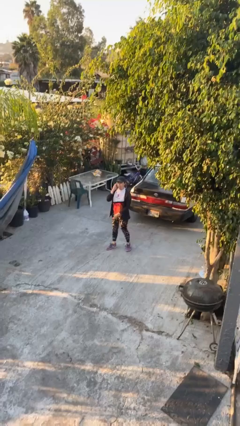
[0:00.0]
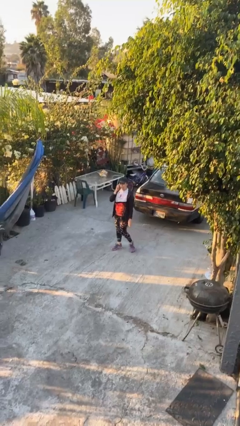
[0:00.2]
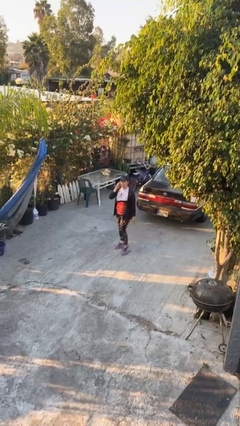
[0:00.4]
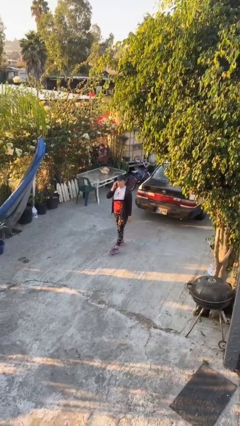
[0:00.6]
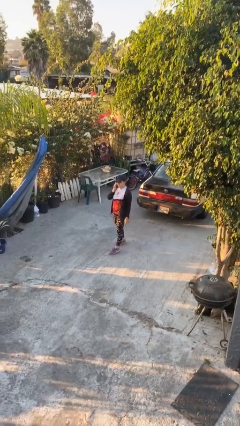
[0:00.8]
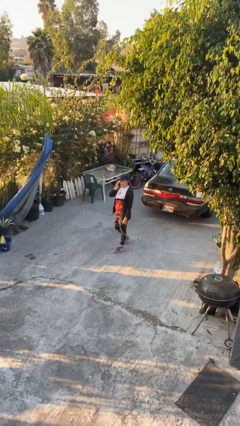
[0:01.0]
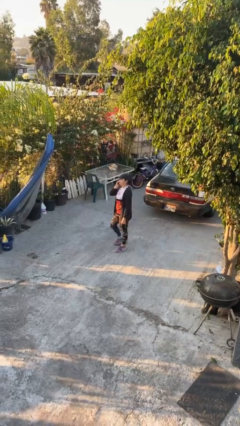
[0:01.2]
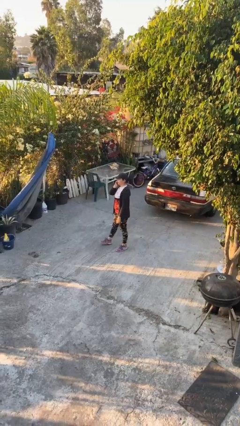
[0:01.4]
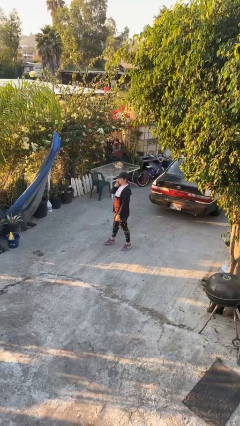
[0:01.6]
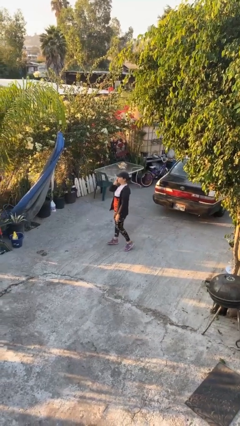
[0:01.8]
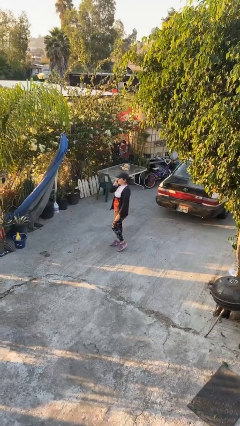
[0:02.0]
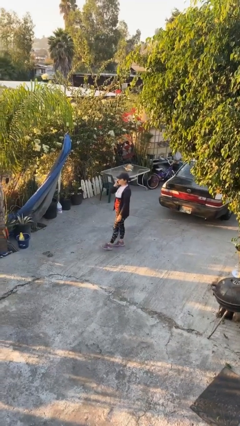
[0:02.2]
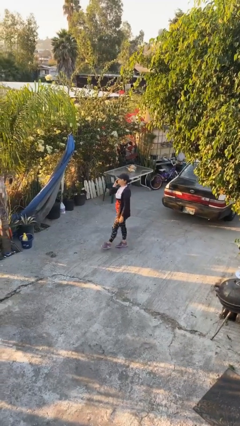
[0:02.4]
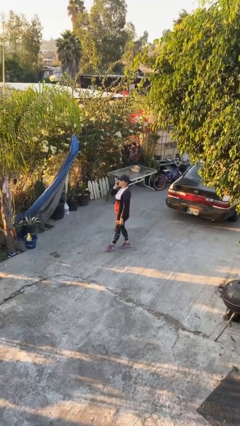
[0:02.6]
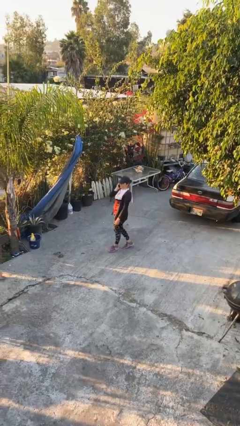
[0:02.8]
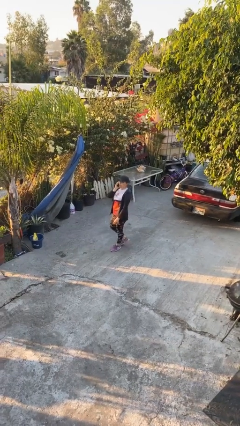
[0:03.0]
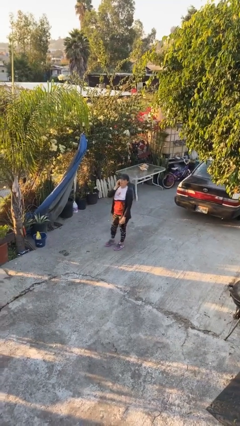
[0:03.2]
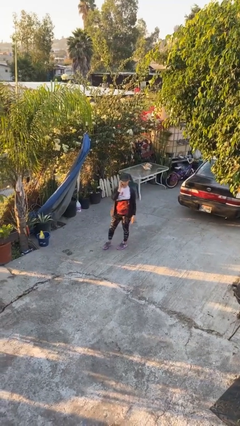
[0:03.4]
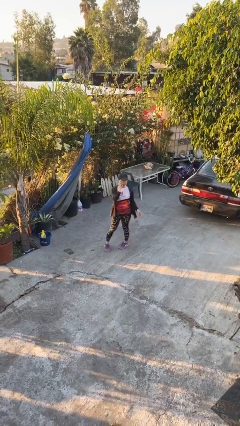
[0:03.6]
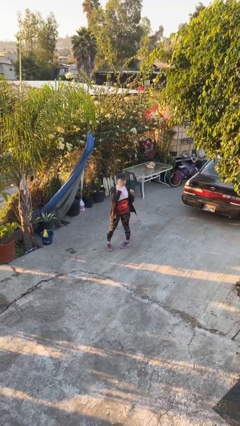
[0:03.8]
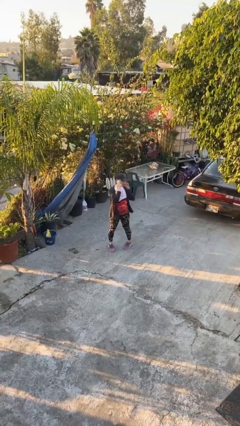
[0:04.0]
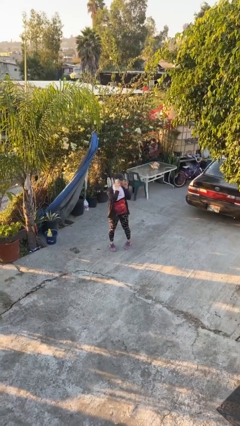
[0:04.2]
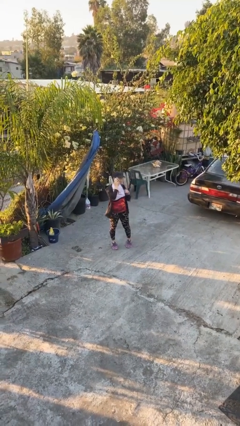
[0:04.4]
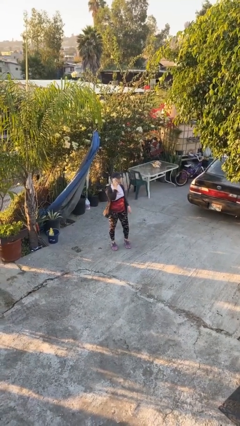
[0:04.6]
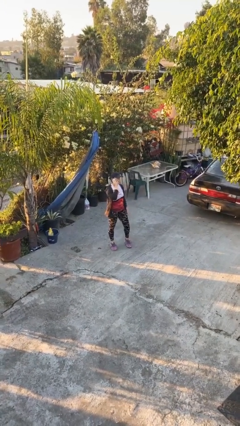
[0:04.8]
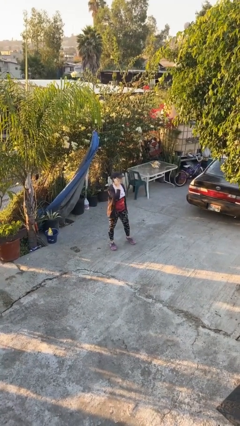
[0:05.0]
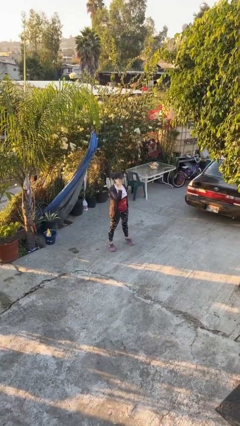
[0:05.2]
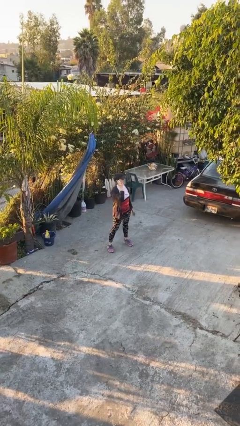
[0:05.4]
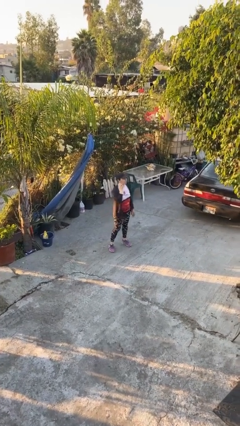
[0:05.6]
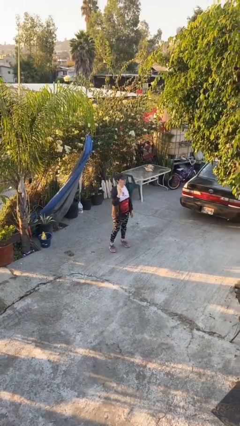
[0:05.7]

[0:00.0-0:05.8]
person talks on phone

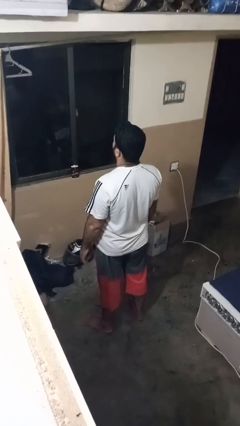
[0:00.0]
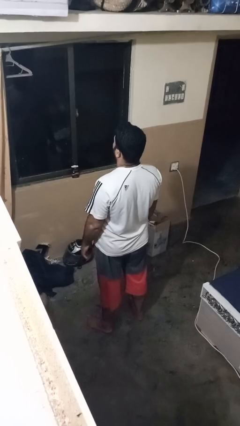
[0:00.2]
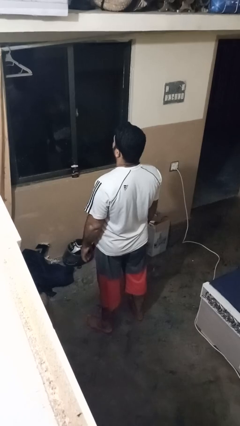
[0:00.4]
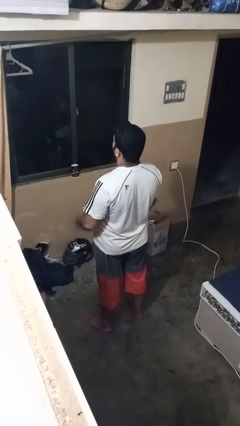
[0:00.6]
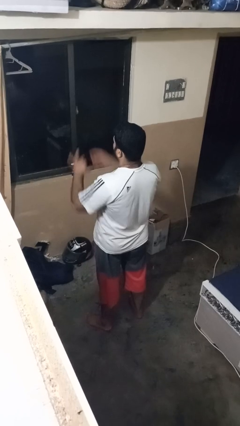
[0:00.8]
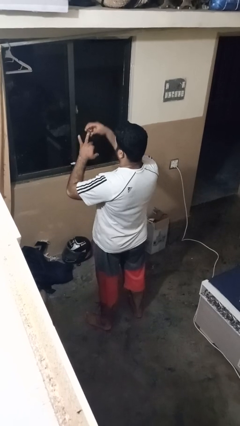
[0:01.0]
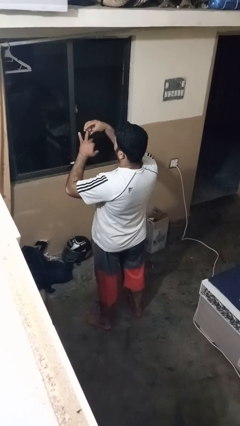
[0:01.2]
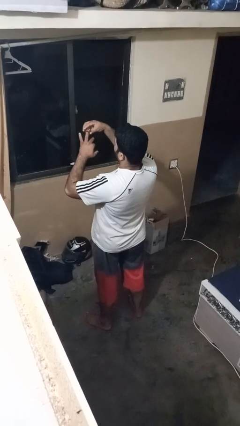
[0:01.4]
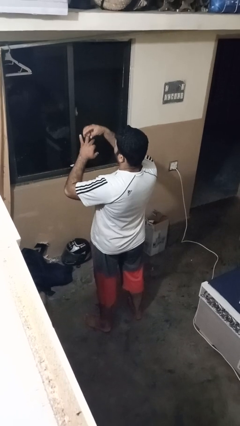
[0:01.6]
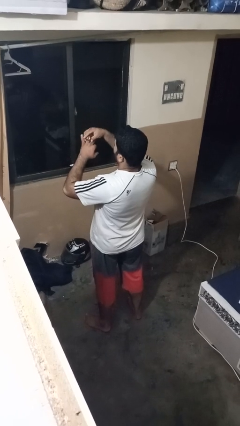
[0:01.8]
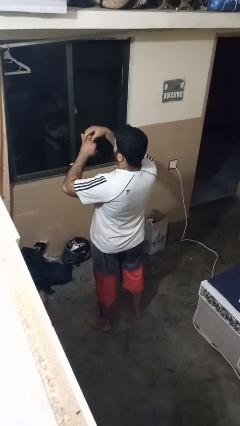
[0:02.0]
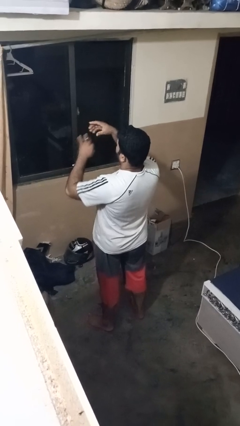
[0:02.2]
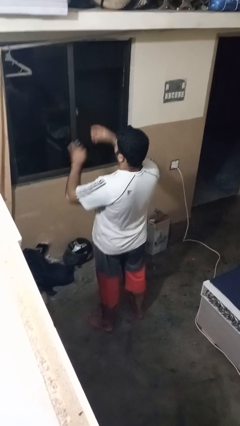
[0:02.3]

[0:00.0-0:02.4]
person puts on ring

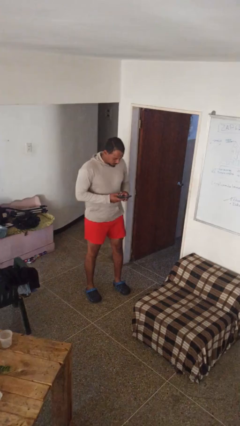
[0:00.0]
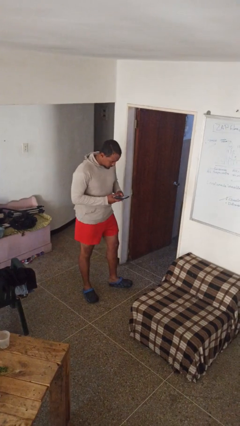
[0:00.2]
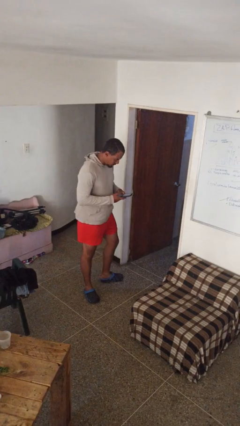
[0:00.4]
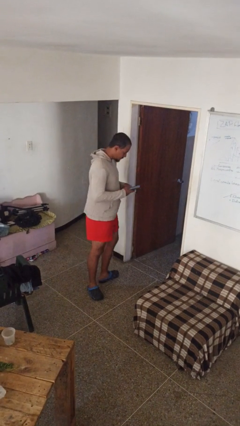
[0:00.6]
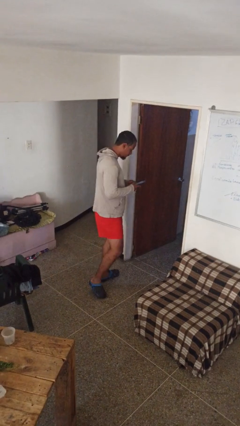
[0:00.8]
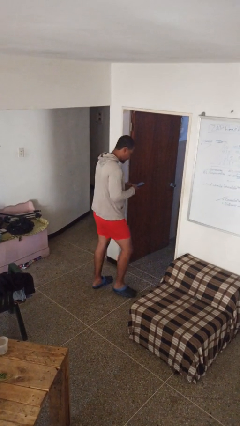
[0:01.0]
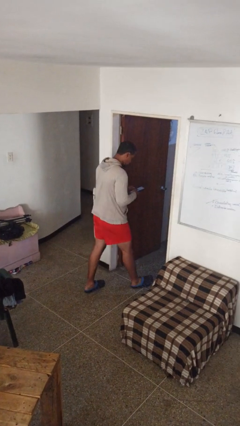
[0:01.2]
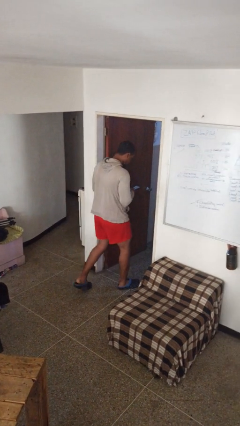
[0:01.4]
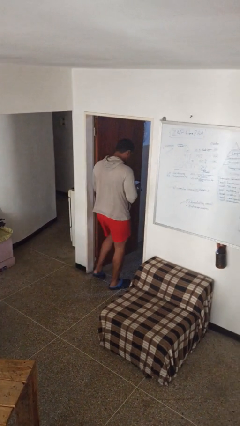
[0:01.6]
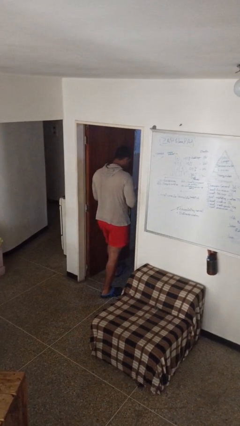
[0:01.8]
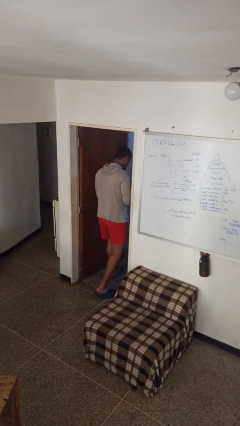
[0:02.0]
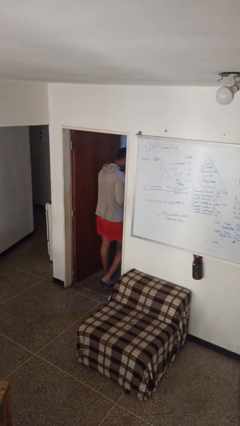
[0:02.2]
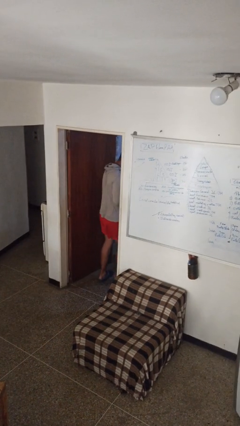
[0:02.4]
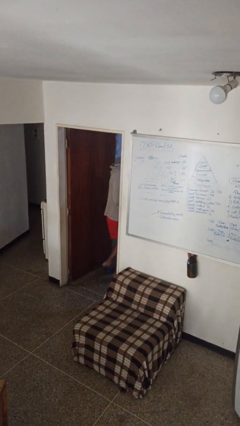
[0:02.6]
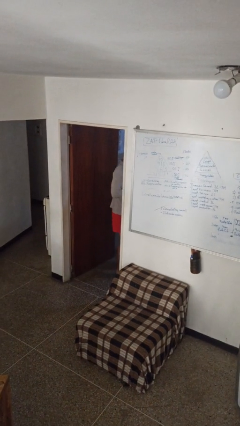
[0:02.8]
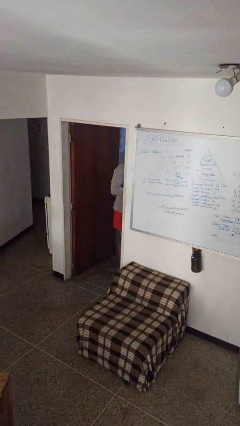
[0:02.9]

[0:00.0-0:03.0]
person exits scene through structure

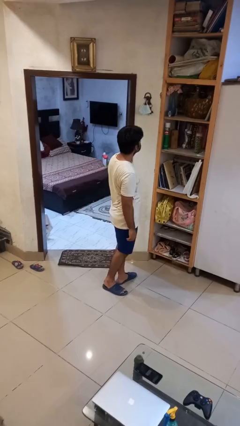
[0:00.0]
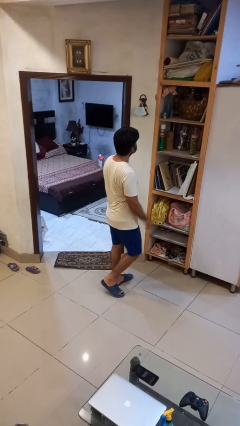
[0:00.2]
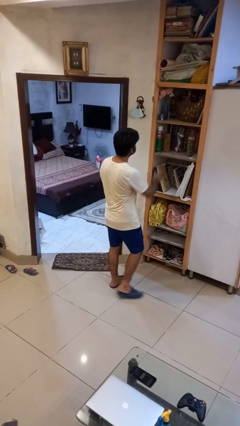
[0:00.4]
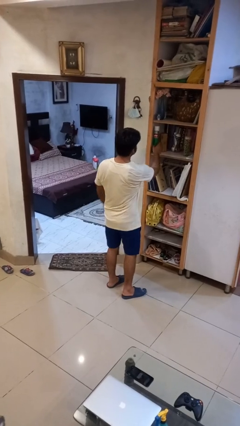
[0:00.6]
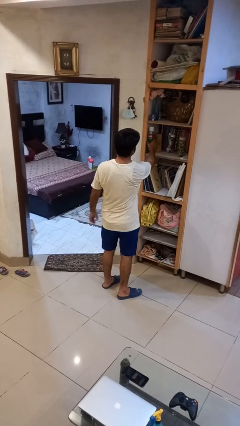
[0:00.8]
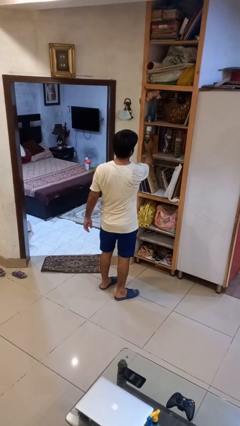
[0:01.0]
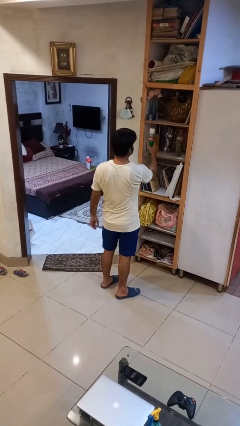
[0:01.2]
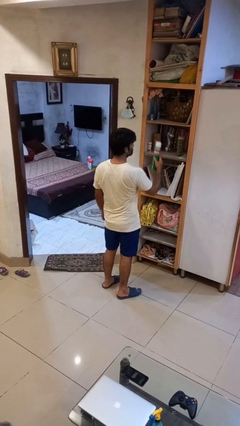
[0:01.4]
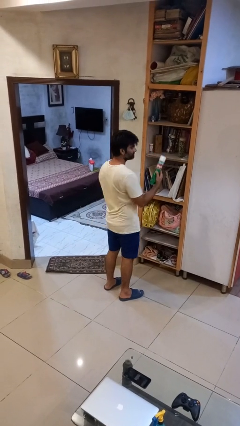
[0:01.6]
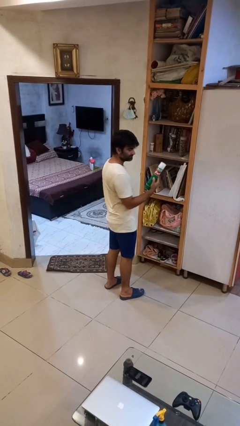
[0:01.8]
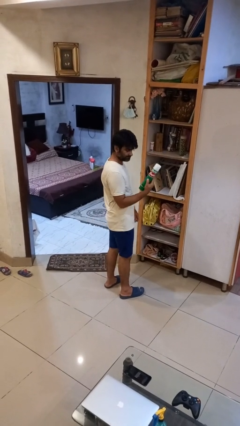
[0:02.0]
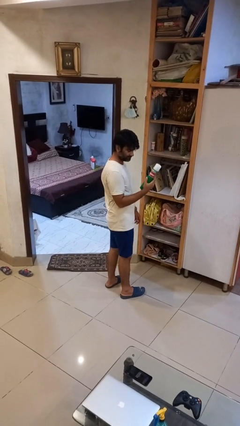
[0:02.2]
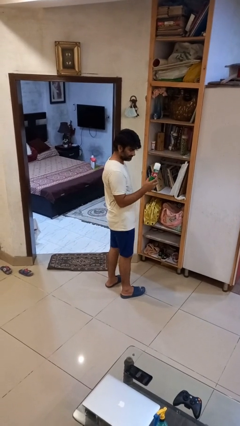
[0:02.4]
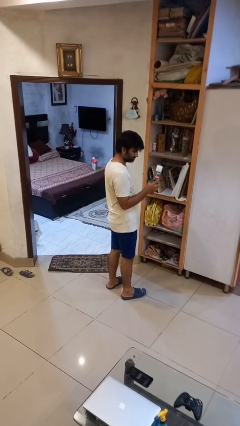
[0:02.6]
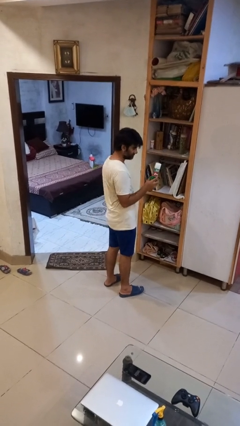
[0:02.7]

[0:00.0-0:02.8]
person picks up object from cabinet

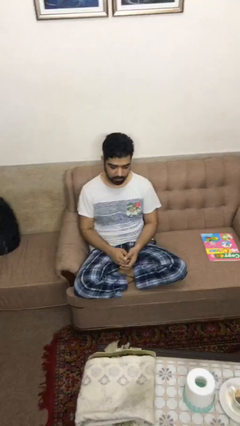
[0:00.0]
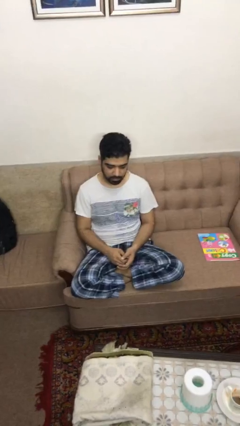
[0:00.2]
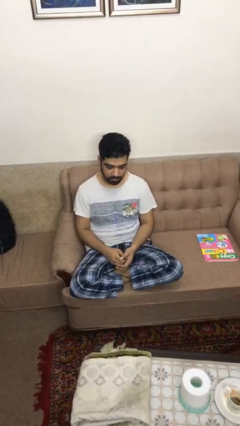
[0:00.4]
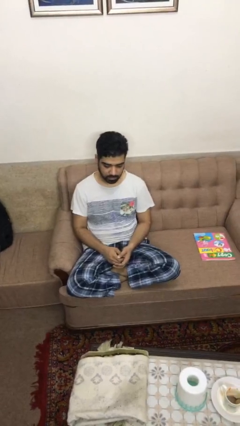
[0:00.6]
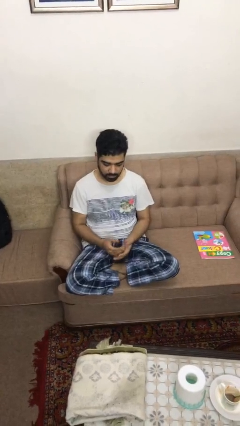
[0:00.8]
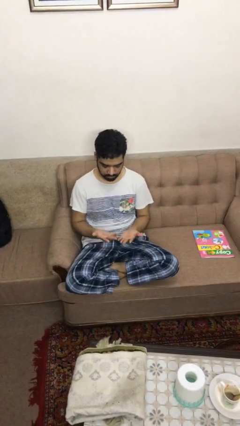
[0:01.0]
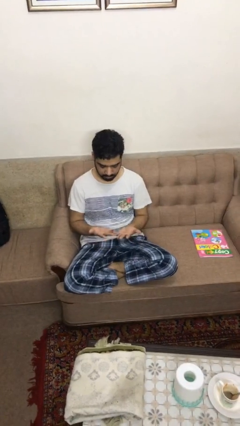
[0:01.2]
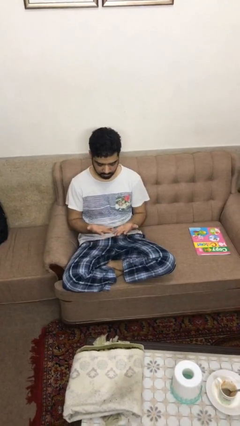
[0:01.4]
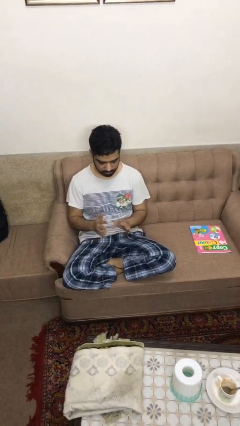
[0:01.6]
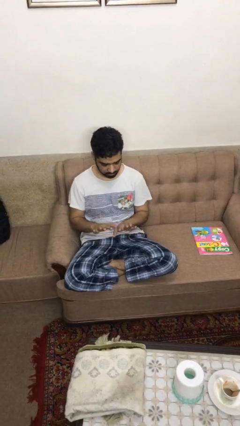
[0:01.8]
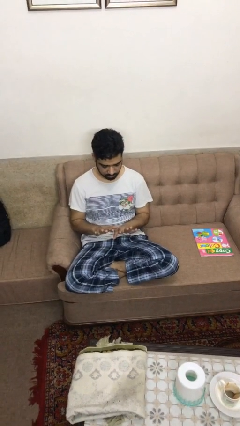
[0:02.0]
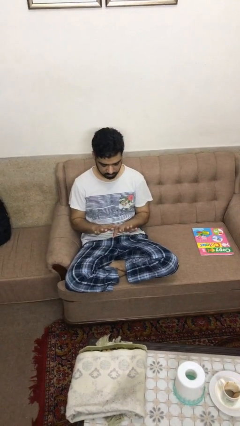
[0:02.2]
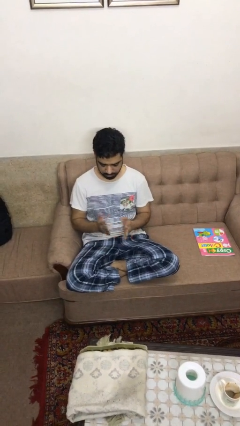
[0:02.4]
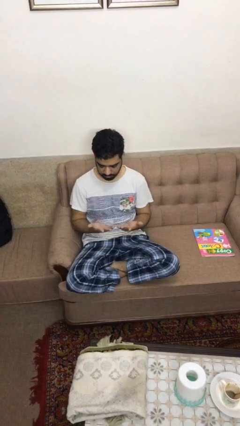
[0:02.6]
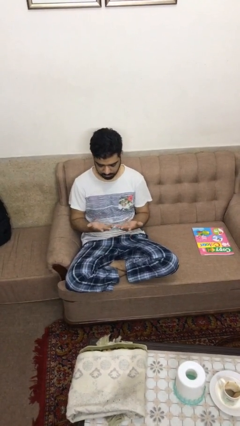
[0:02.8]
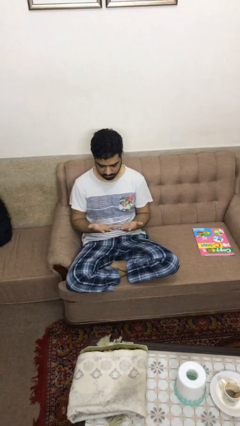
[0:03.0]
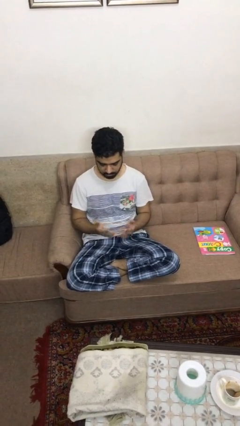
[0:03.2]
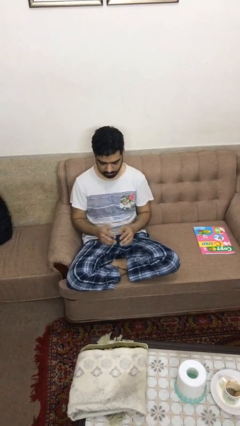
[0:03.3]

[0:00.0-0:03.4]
person looks at hands in lap

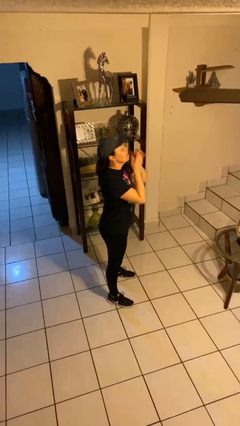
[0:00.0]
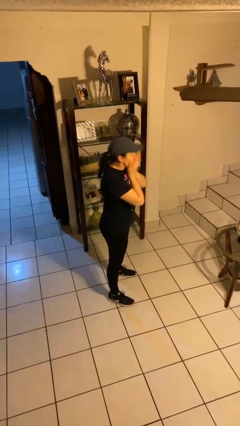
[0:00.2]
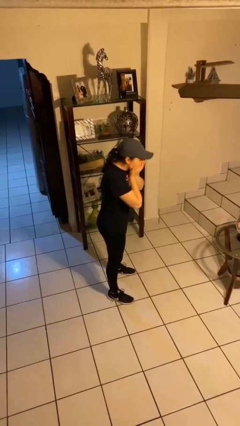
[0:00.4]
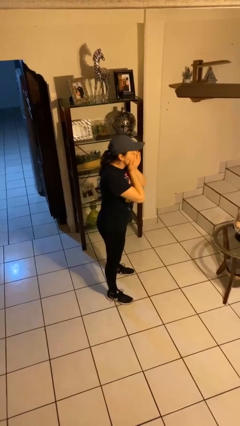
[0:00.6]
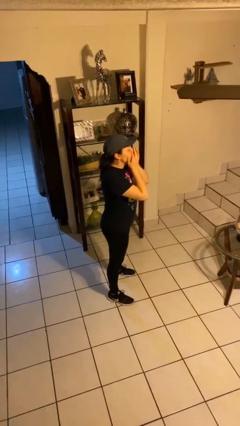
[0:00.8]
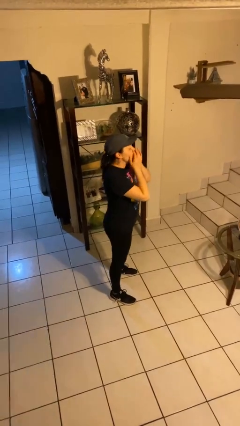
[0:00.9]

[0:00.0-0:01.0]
person sneezes into hand
